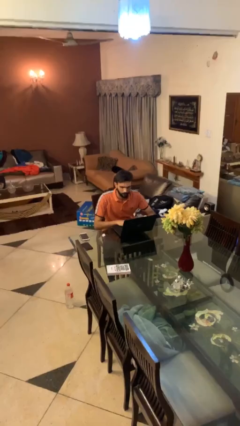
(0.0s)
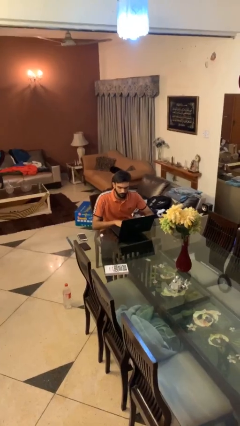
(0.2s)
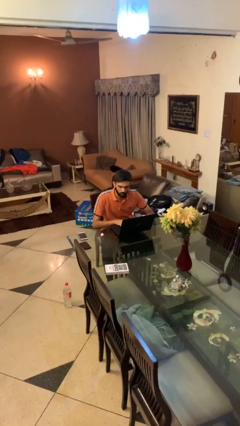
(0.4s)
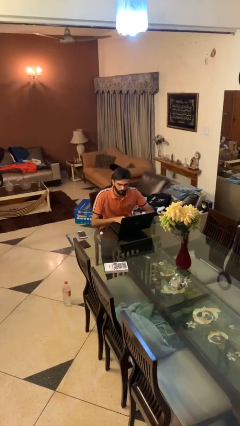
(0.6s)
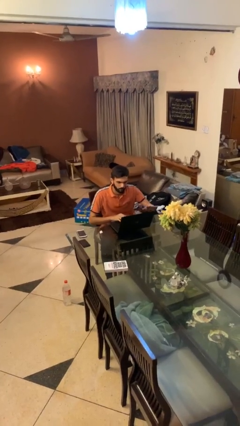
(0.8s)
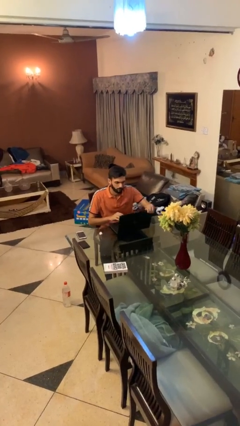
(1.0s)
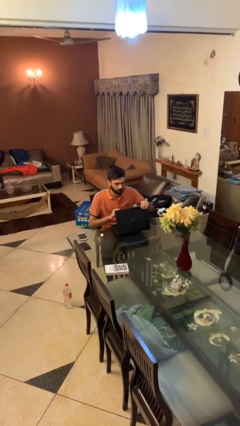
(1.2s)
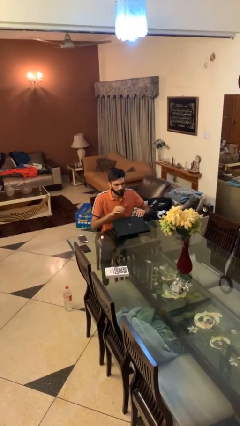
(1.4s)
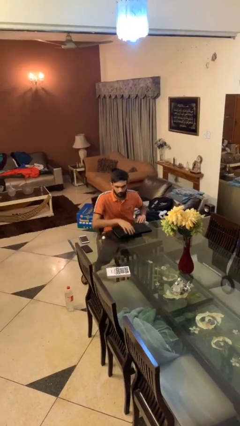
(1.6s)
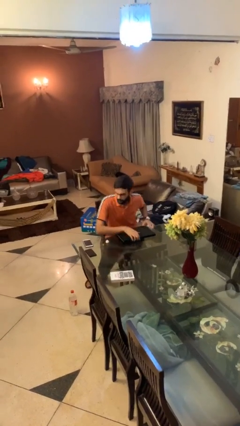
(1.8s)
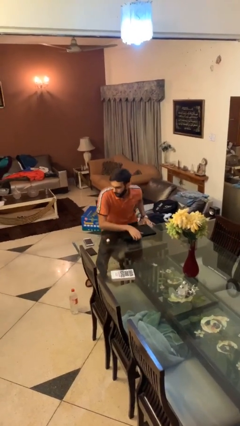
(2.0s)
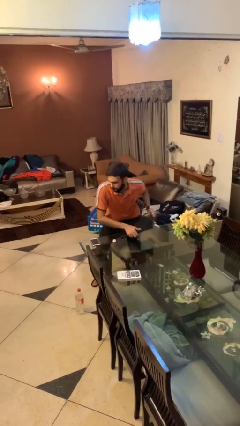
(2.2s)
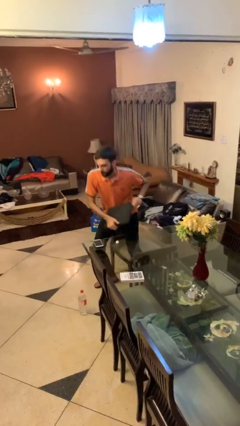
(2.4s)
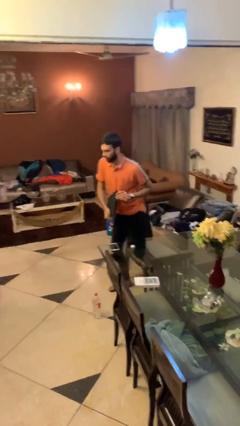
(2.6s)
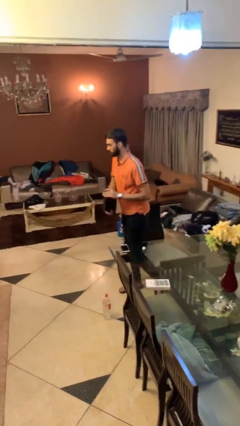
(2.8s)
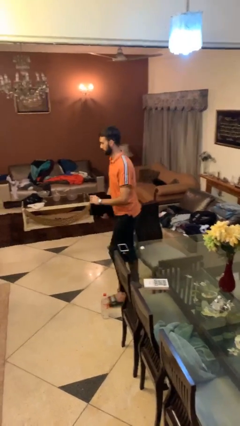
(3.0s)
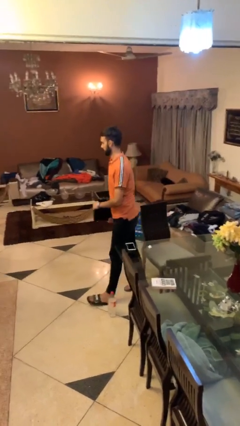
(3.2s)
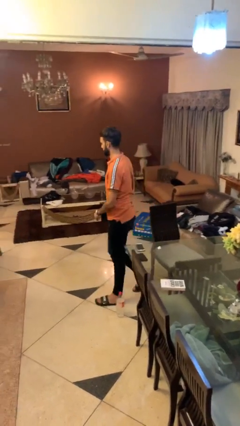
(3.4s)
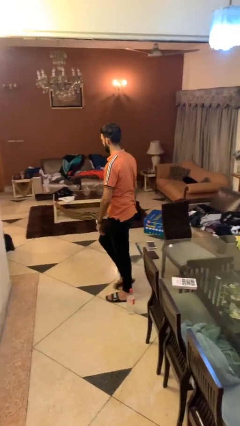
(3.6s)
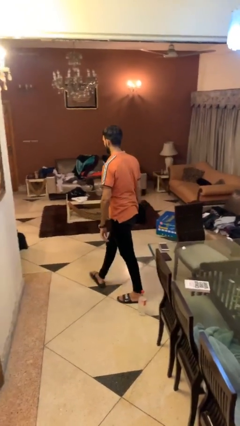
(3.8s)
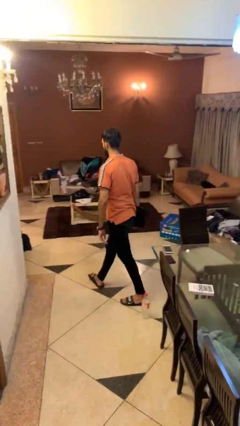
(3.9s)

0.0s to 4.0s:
person stands up

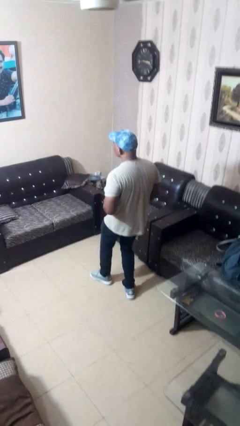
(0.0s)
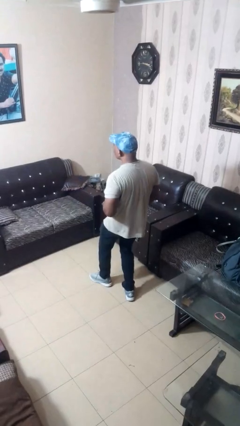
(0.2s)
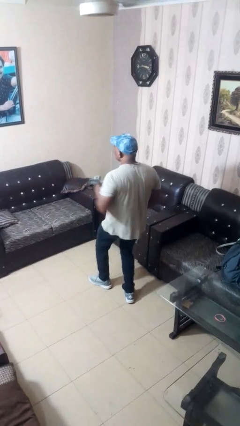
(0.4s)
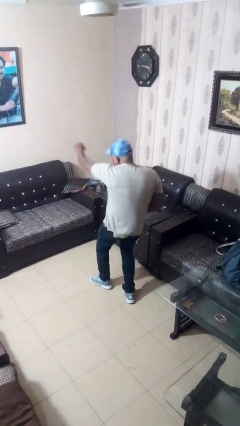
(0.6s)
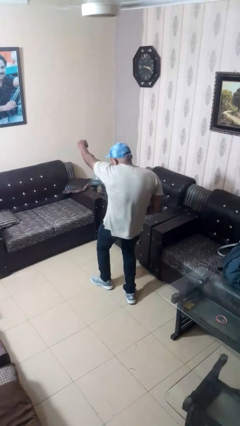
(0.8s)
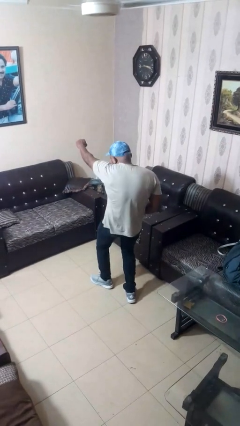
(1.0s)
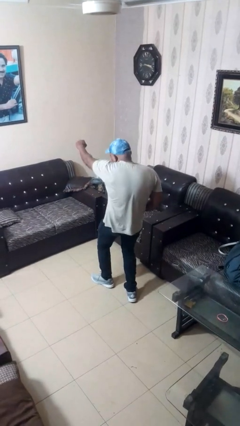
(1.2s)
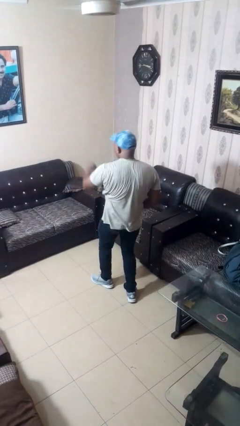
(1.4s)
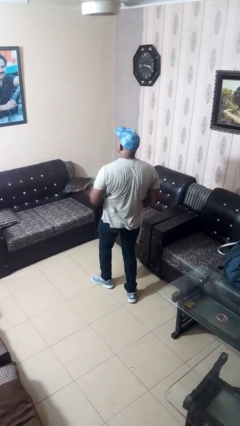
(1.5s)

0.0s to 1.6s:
person karate chop

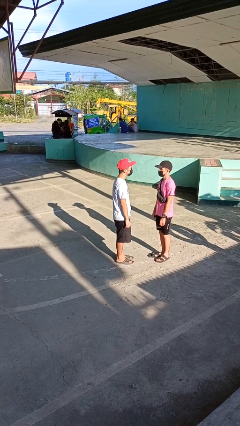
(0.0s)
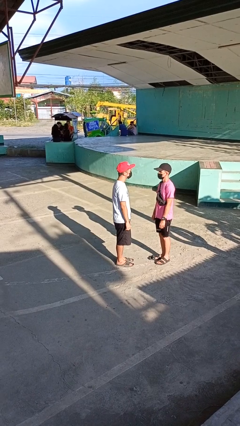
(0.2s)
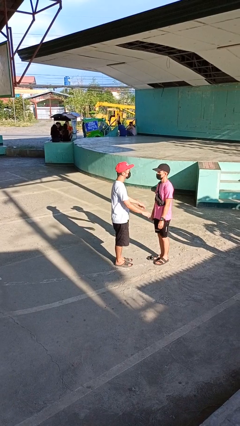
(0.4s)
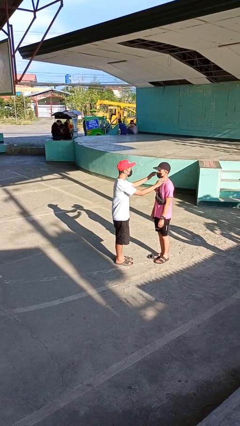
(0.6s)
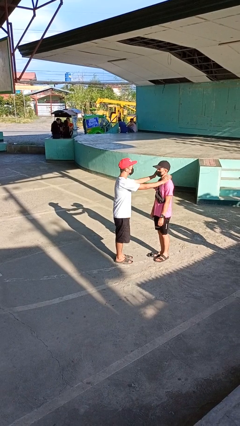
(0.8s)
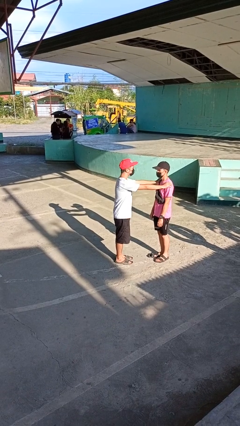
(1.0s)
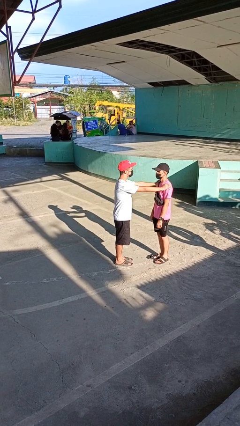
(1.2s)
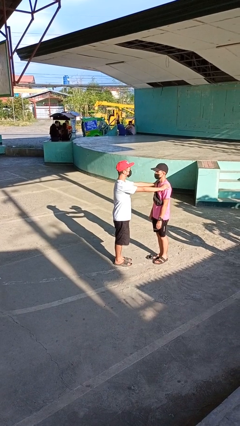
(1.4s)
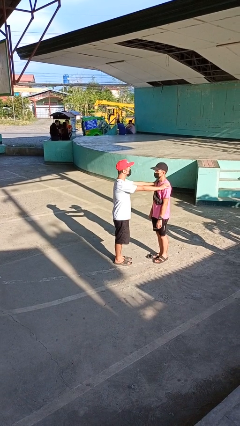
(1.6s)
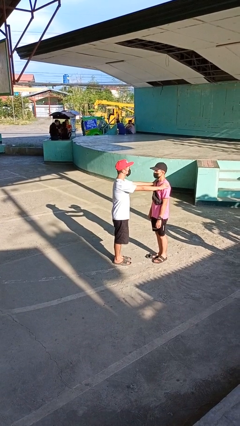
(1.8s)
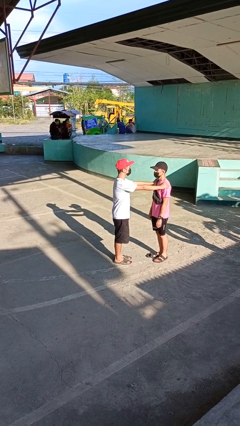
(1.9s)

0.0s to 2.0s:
person grabs person by shoulder

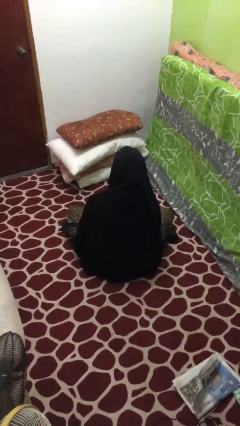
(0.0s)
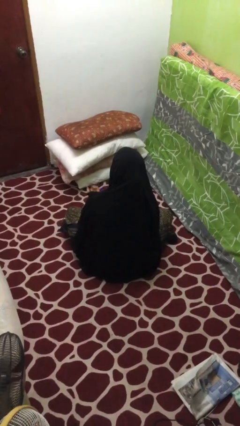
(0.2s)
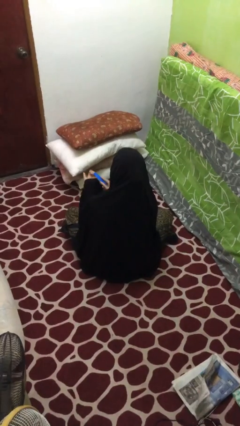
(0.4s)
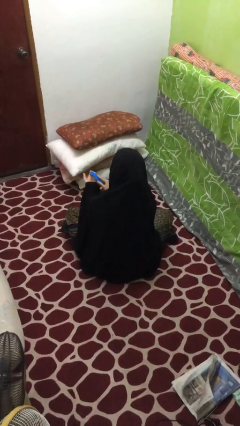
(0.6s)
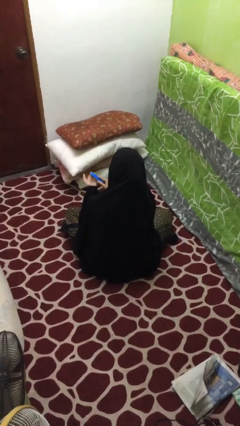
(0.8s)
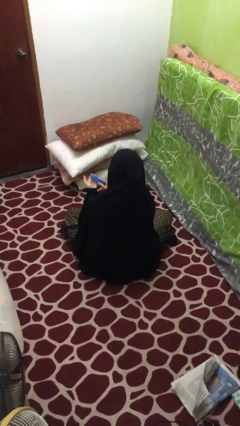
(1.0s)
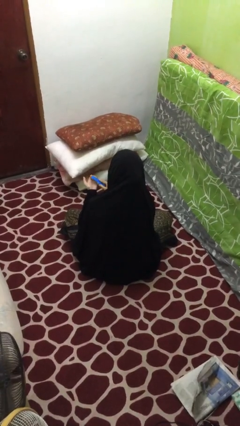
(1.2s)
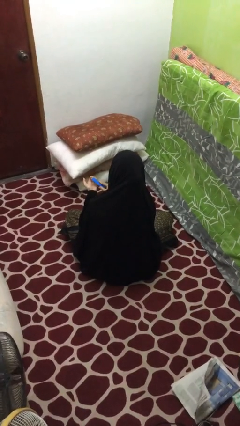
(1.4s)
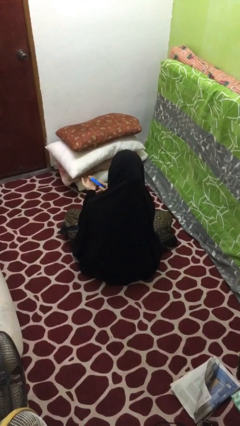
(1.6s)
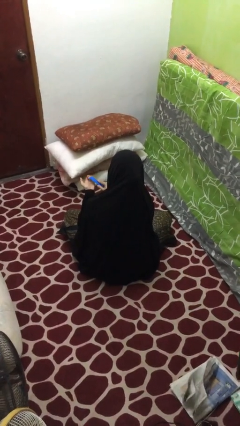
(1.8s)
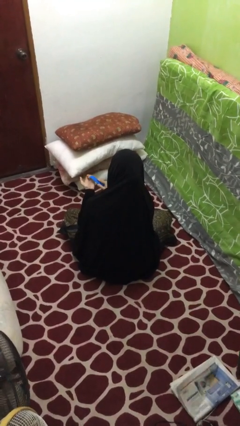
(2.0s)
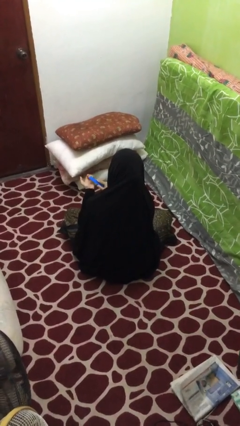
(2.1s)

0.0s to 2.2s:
person files fingernails

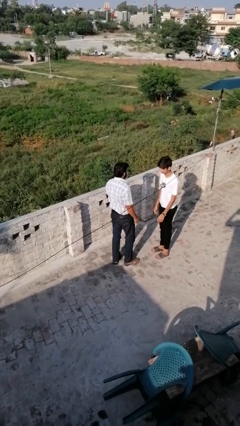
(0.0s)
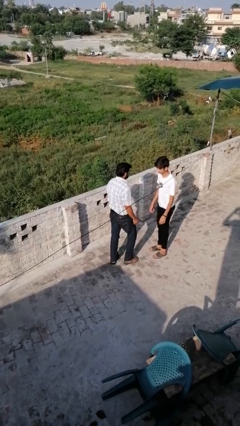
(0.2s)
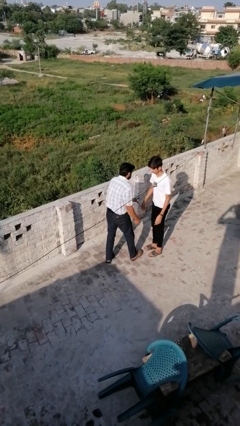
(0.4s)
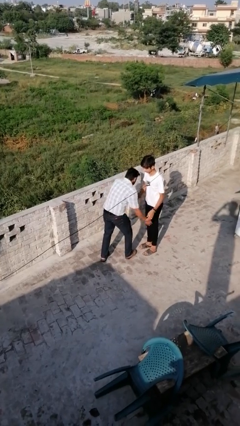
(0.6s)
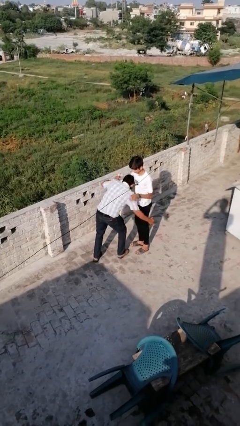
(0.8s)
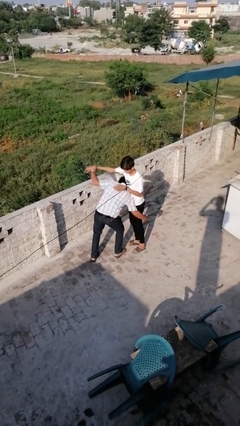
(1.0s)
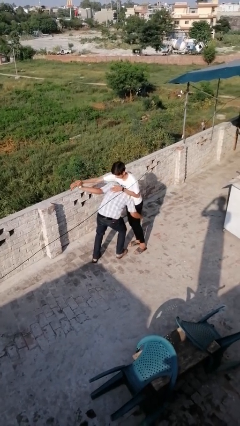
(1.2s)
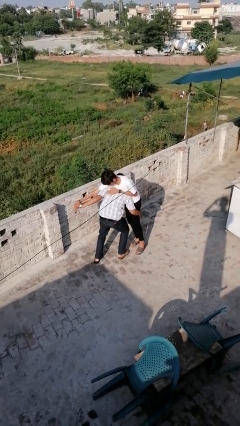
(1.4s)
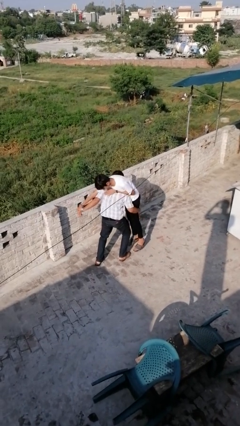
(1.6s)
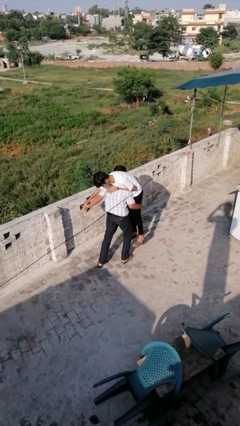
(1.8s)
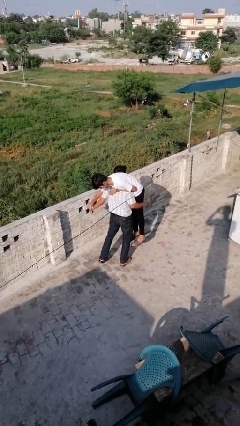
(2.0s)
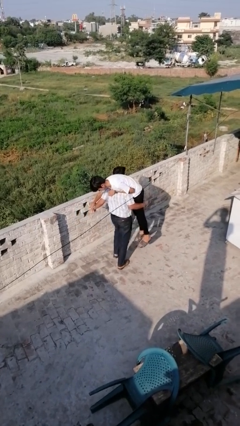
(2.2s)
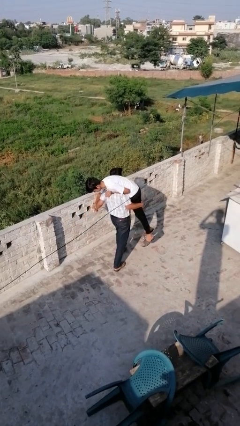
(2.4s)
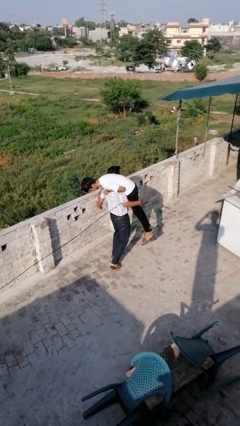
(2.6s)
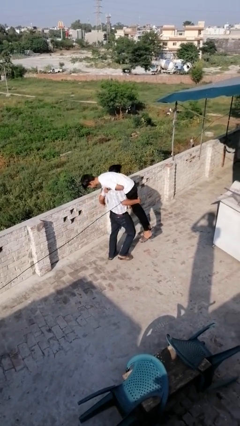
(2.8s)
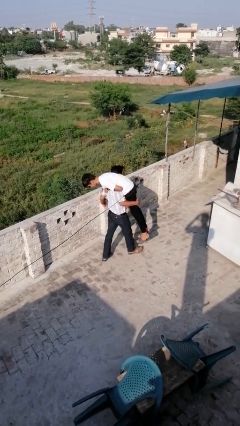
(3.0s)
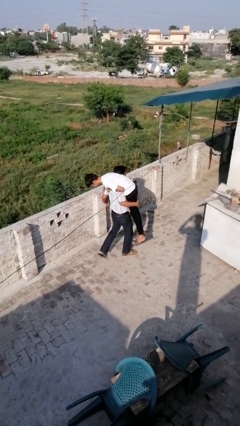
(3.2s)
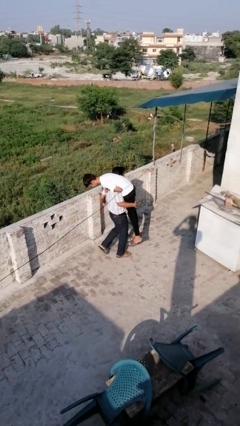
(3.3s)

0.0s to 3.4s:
person carries person on shoulders

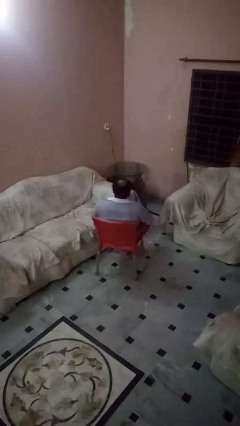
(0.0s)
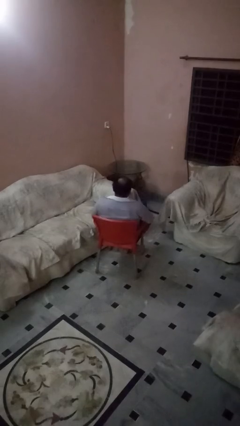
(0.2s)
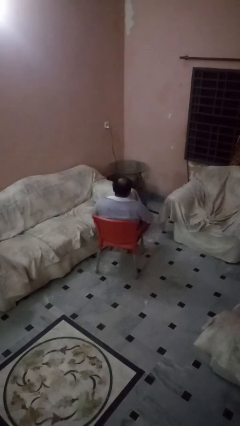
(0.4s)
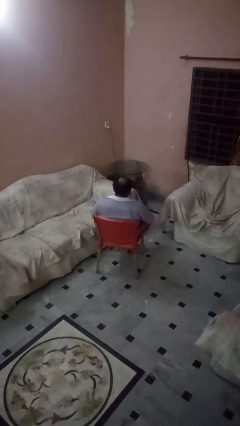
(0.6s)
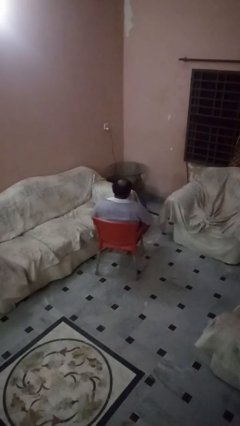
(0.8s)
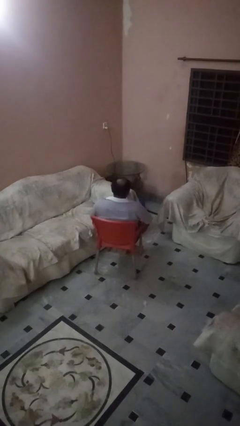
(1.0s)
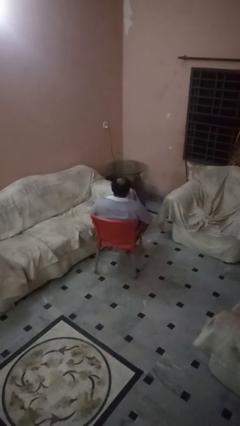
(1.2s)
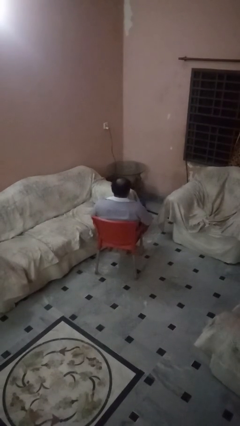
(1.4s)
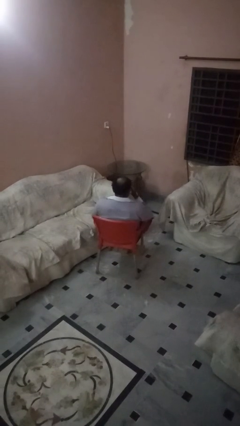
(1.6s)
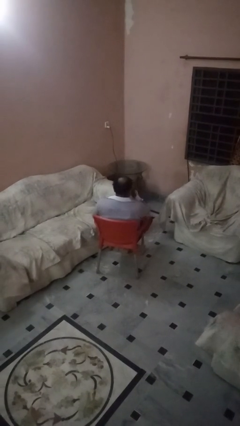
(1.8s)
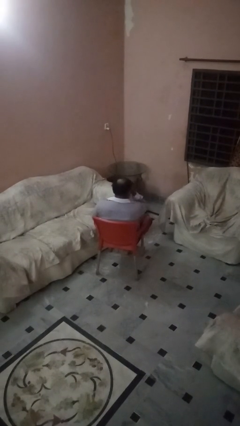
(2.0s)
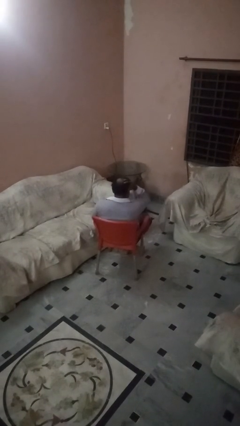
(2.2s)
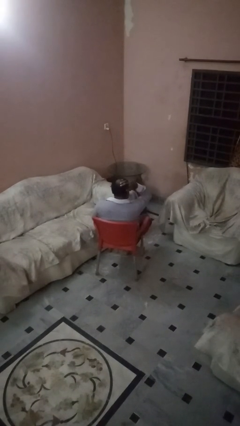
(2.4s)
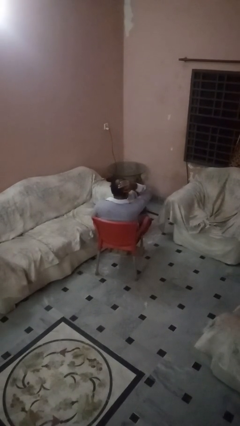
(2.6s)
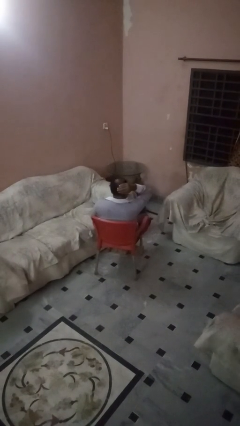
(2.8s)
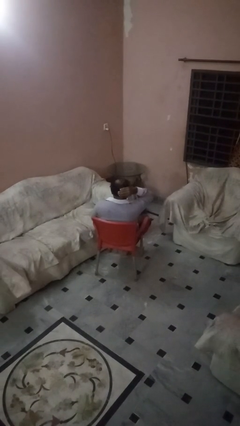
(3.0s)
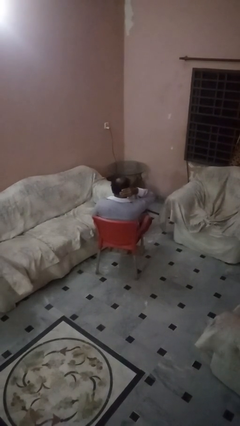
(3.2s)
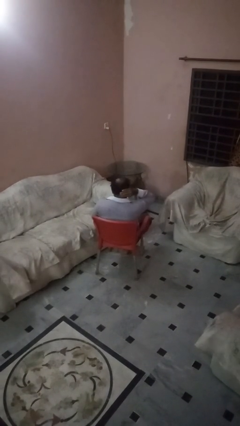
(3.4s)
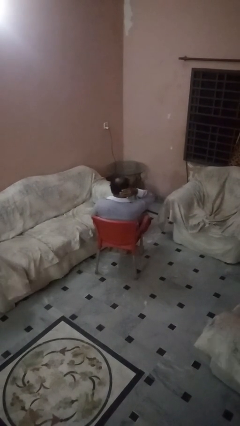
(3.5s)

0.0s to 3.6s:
person strokes hair

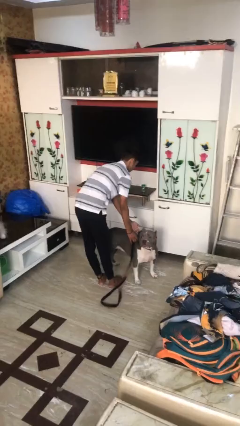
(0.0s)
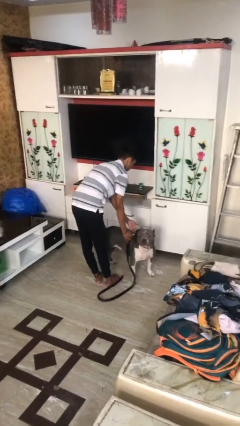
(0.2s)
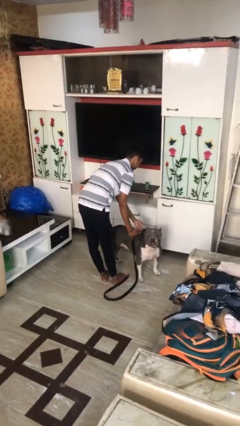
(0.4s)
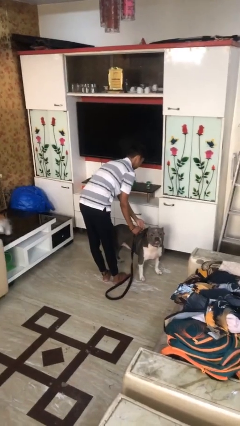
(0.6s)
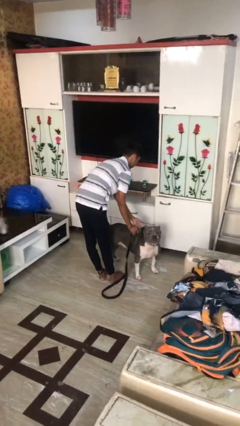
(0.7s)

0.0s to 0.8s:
person unattaches leash from dog
